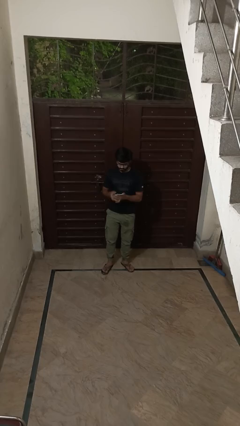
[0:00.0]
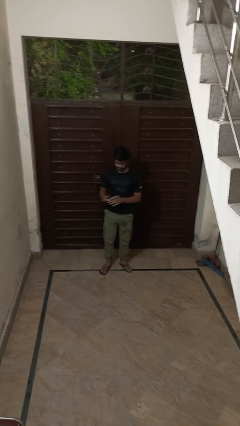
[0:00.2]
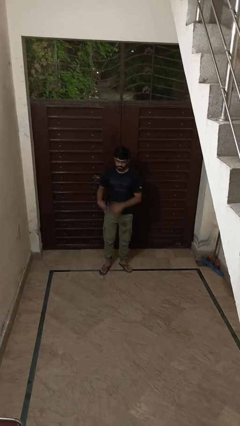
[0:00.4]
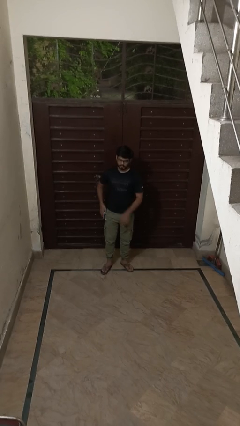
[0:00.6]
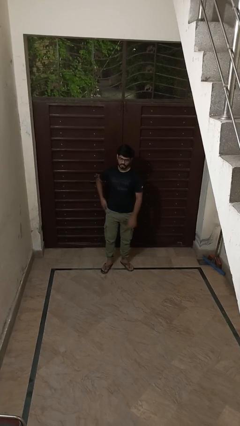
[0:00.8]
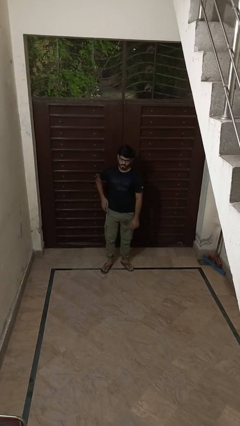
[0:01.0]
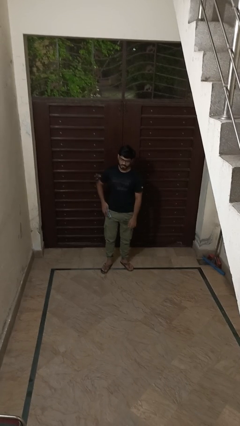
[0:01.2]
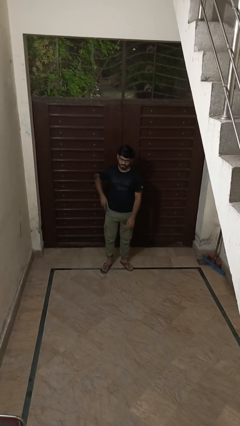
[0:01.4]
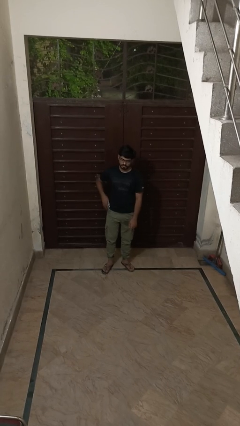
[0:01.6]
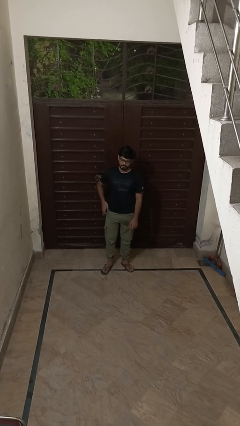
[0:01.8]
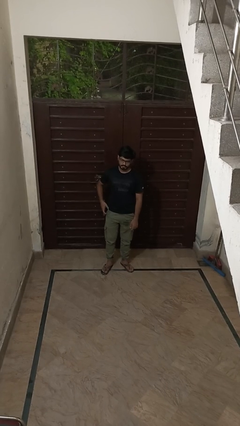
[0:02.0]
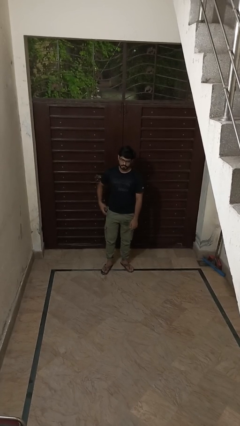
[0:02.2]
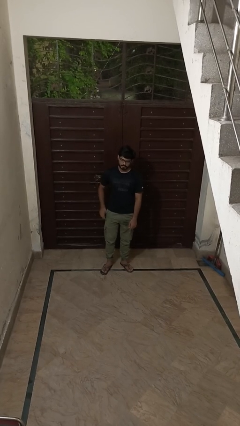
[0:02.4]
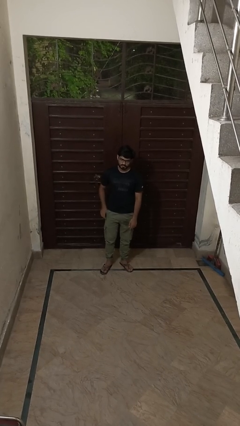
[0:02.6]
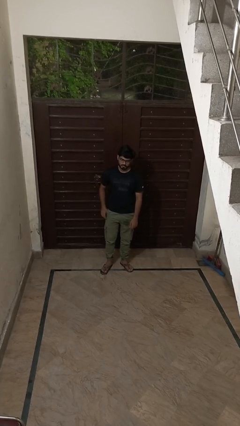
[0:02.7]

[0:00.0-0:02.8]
person puts phone into pocket

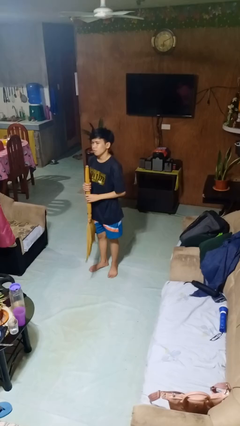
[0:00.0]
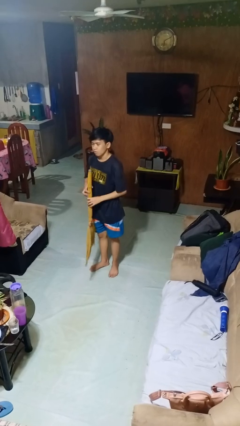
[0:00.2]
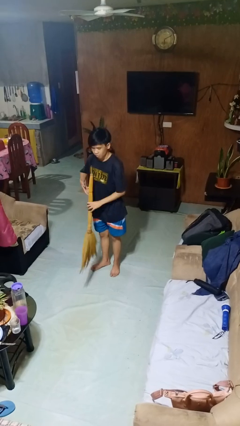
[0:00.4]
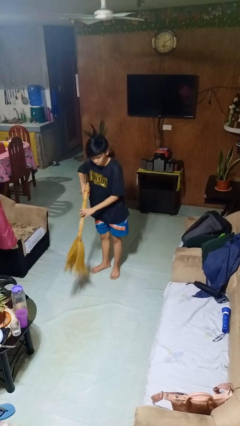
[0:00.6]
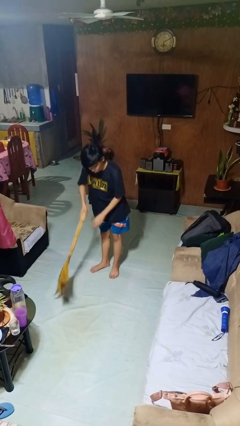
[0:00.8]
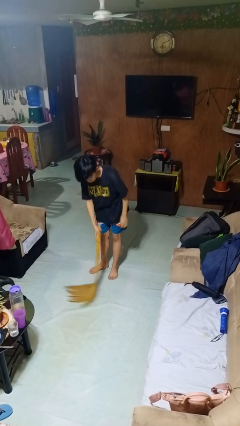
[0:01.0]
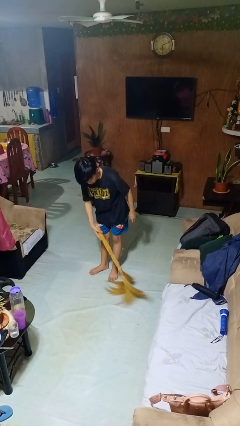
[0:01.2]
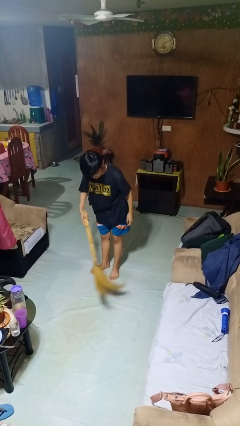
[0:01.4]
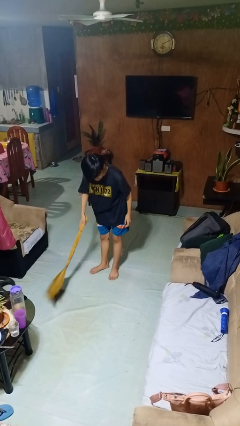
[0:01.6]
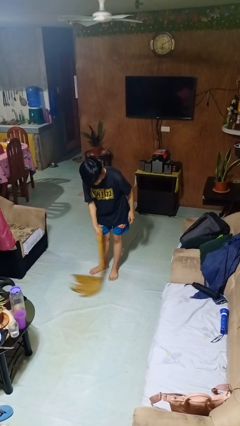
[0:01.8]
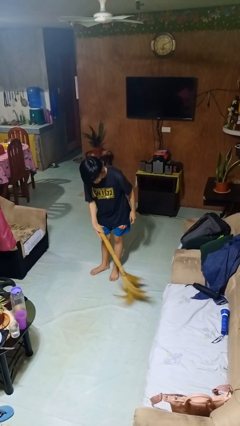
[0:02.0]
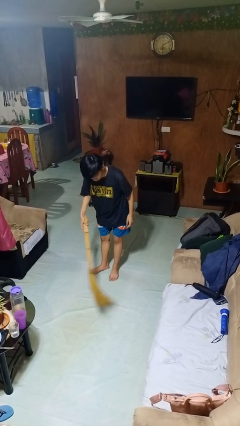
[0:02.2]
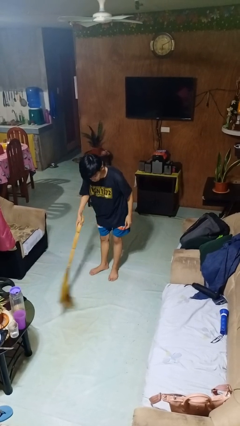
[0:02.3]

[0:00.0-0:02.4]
person sweeps floor

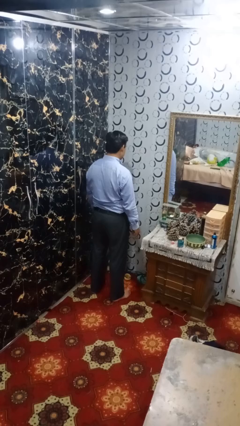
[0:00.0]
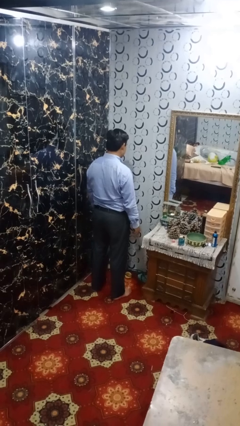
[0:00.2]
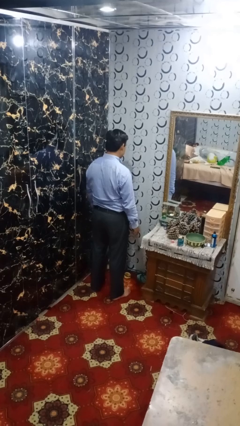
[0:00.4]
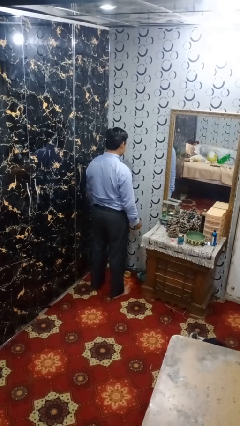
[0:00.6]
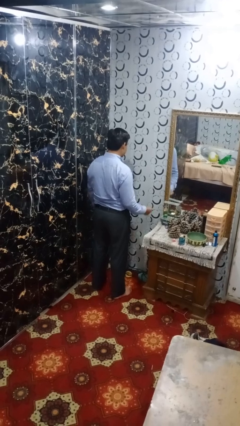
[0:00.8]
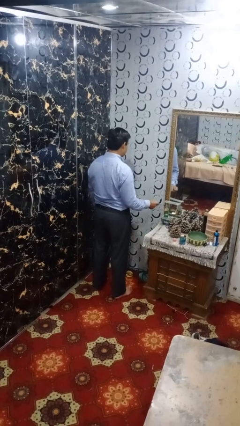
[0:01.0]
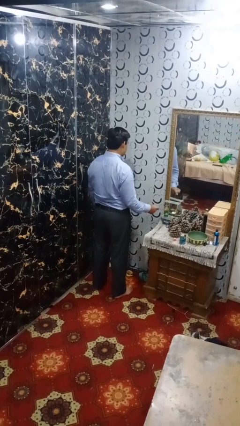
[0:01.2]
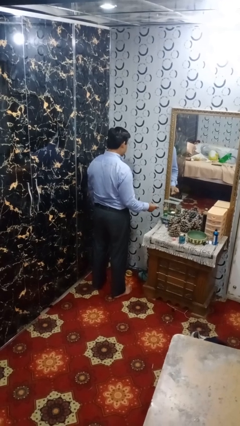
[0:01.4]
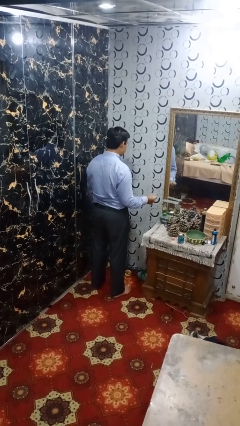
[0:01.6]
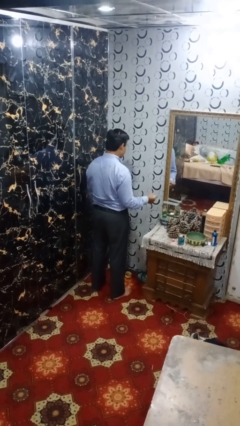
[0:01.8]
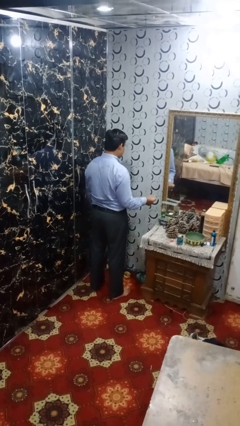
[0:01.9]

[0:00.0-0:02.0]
person snaps fingers

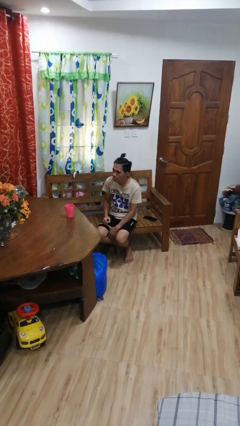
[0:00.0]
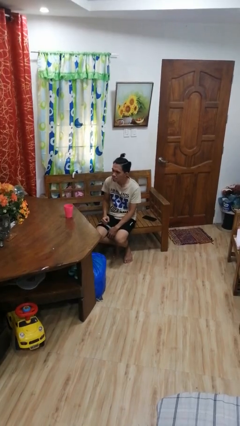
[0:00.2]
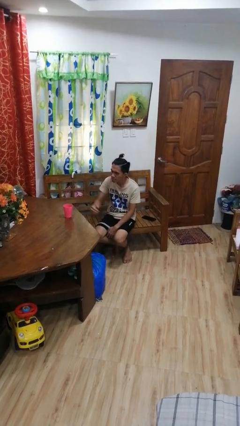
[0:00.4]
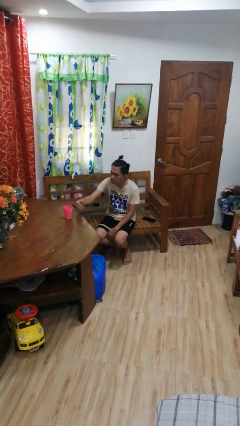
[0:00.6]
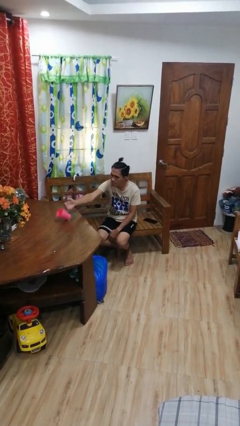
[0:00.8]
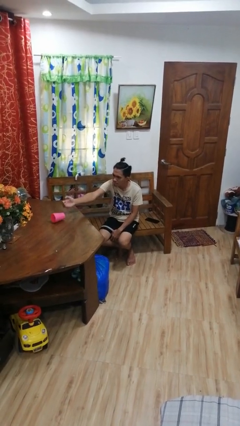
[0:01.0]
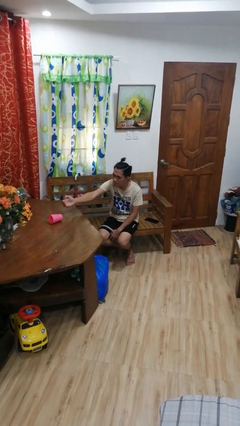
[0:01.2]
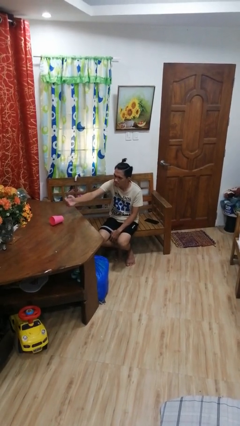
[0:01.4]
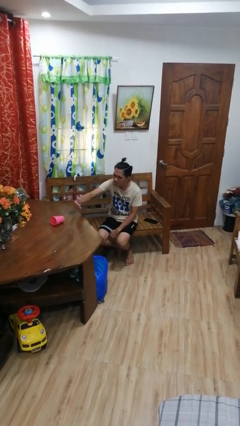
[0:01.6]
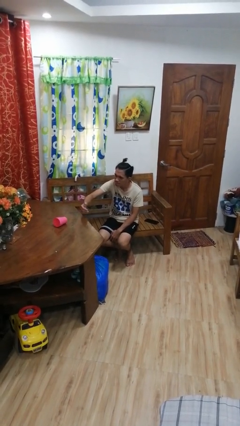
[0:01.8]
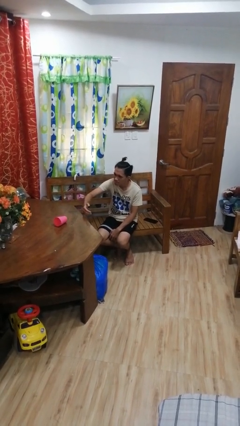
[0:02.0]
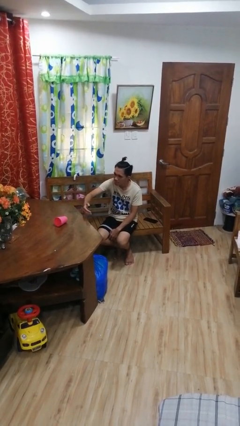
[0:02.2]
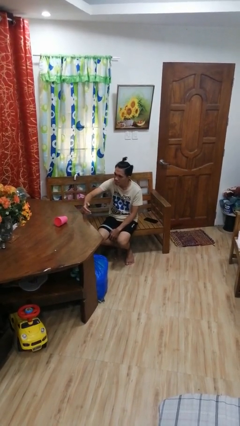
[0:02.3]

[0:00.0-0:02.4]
person knocks over glass

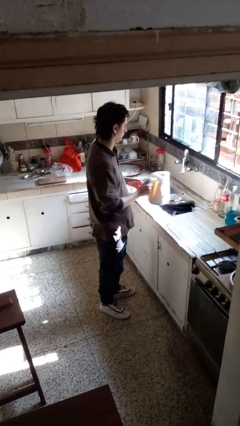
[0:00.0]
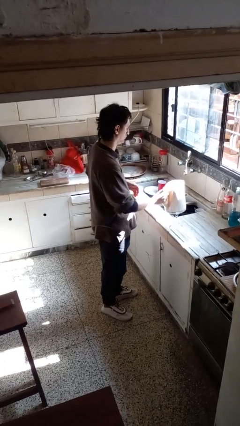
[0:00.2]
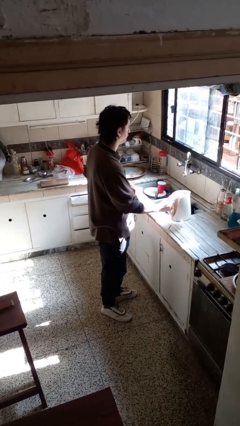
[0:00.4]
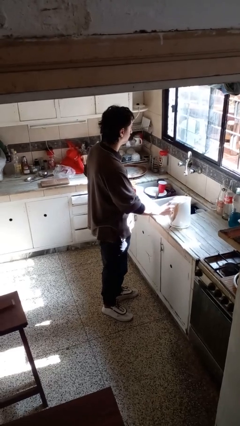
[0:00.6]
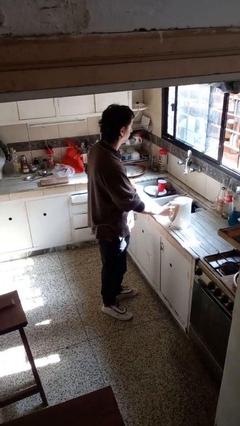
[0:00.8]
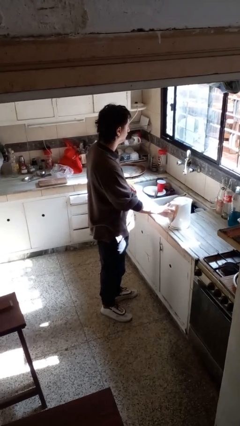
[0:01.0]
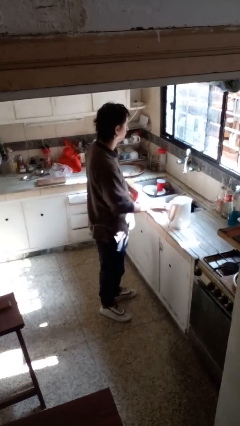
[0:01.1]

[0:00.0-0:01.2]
person puts down object on countertop

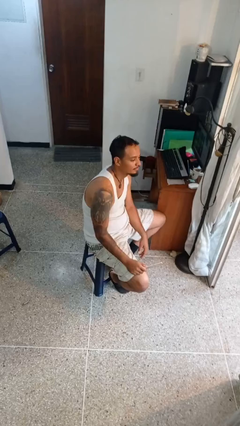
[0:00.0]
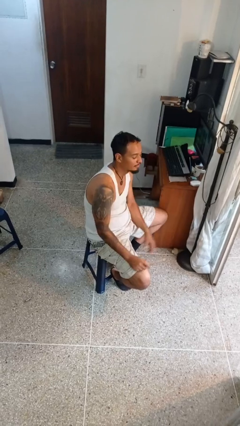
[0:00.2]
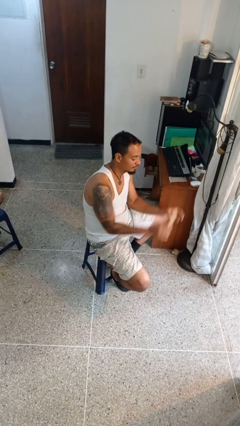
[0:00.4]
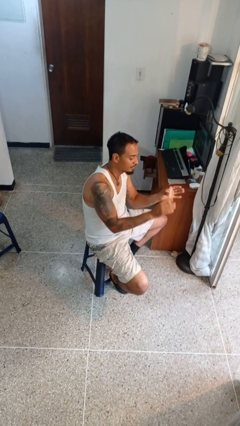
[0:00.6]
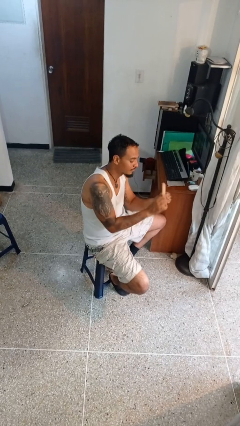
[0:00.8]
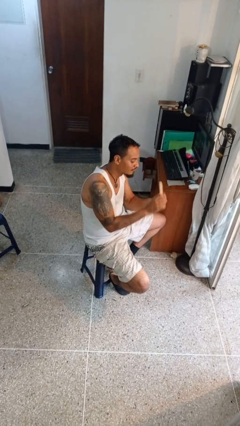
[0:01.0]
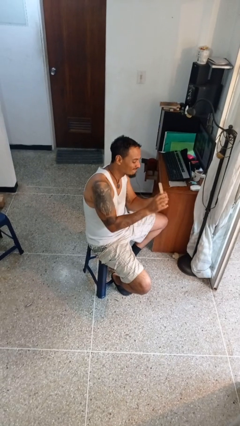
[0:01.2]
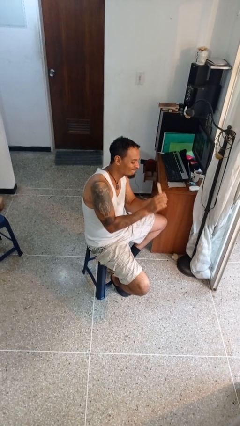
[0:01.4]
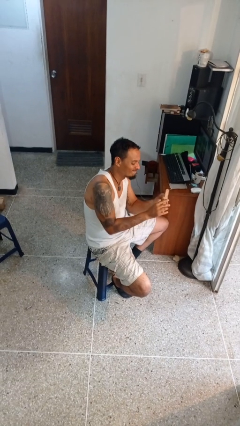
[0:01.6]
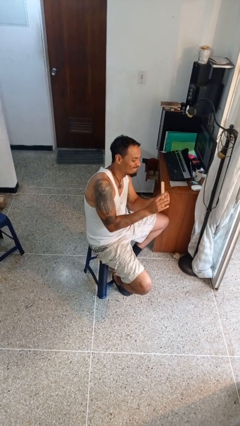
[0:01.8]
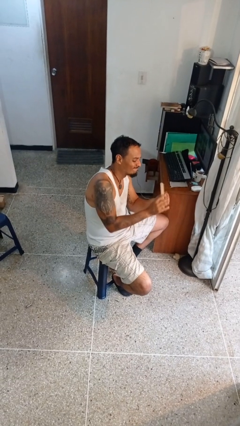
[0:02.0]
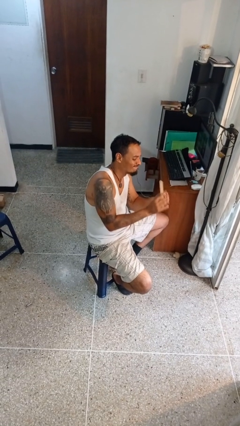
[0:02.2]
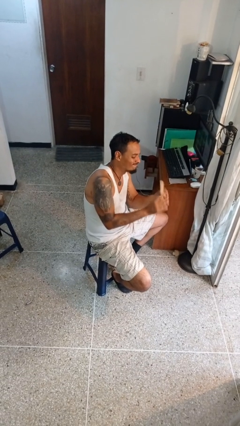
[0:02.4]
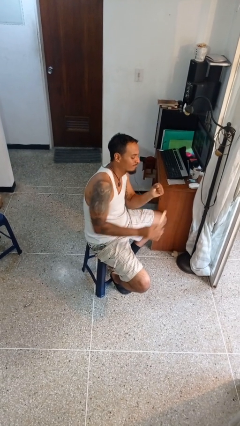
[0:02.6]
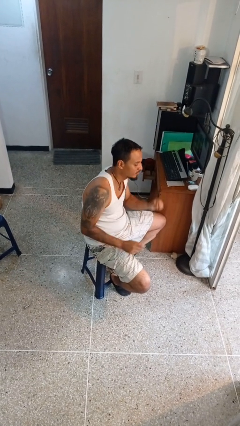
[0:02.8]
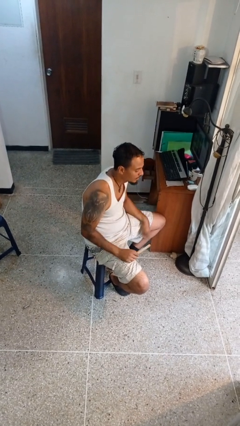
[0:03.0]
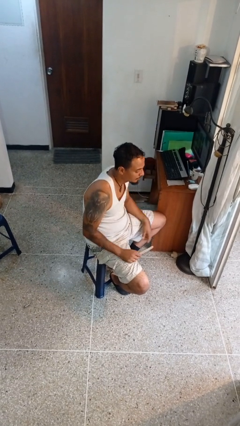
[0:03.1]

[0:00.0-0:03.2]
person files fingernails

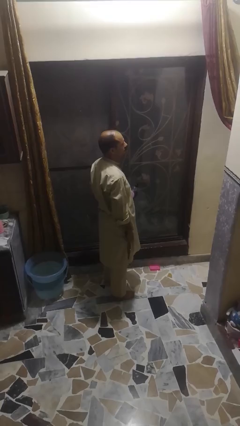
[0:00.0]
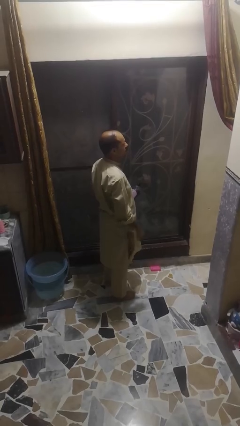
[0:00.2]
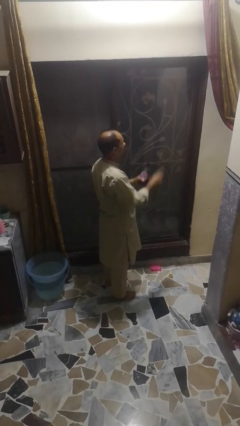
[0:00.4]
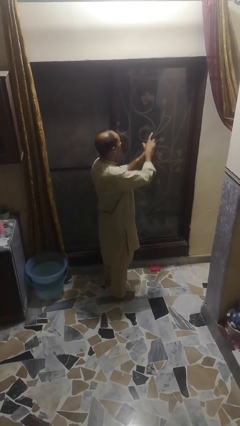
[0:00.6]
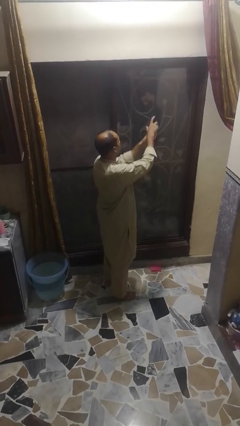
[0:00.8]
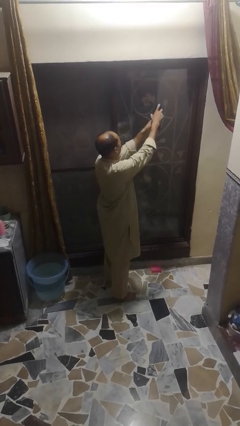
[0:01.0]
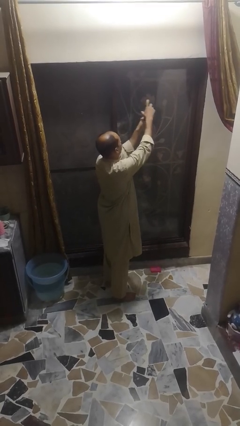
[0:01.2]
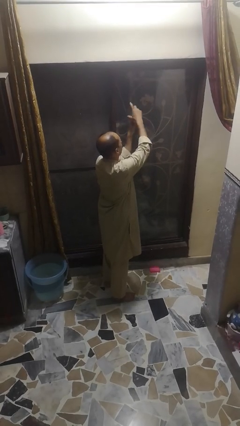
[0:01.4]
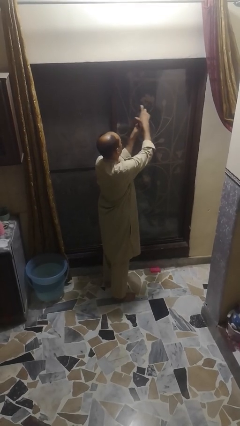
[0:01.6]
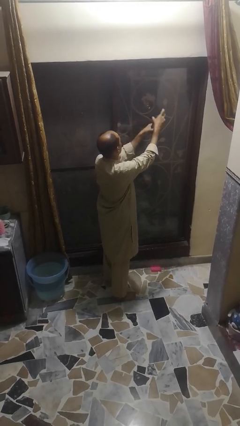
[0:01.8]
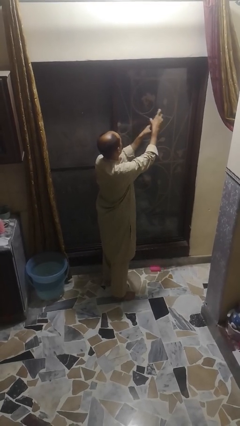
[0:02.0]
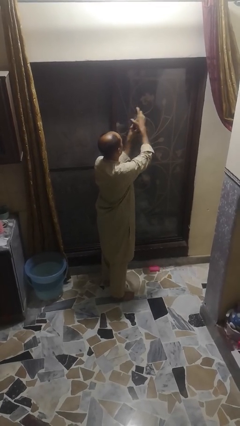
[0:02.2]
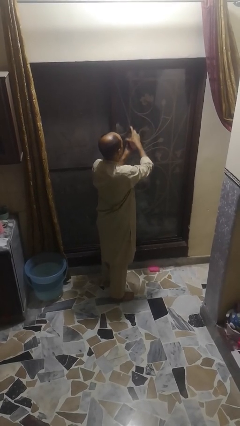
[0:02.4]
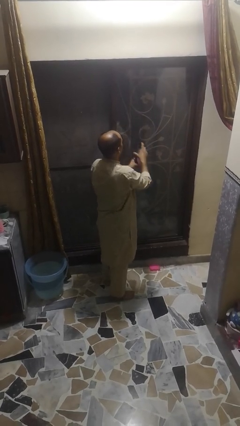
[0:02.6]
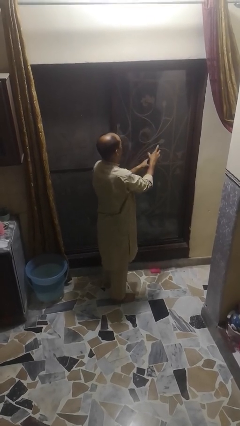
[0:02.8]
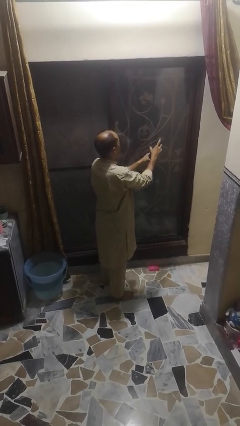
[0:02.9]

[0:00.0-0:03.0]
person sprays from bottle
